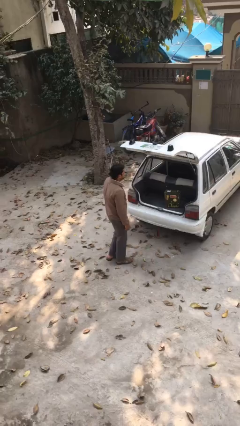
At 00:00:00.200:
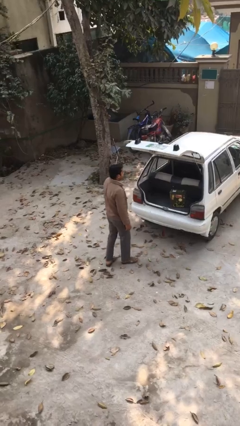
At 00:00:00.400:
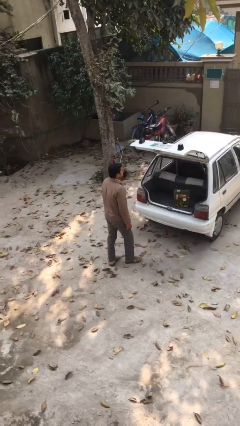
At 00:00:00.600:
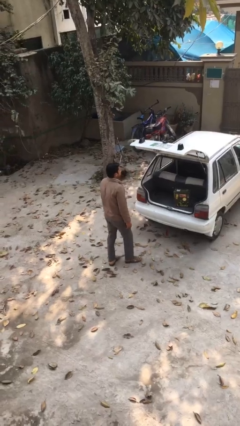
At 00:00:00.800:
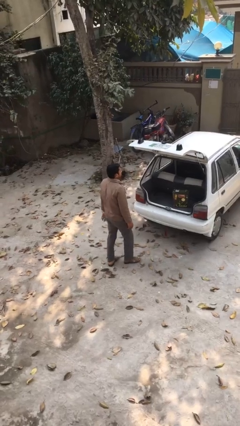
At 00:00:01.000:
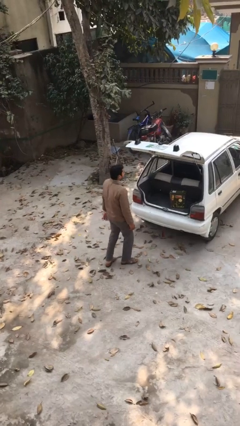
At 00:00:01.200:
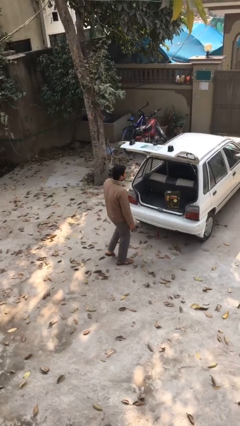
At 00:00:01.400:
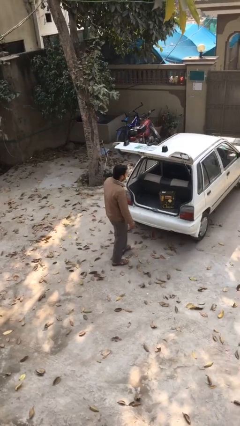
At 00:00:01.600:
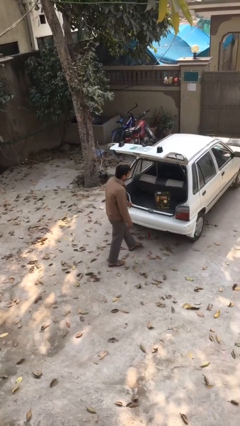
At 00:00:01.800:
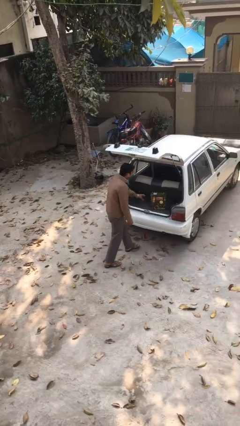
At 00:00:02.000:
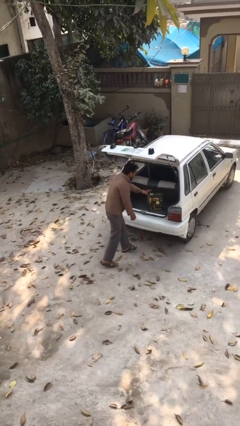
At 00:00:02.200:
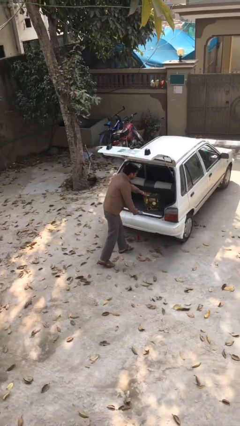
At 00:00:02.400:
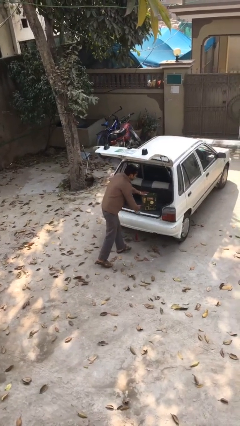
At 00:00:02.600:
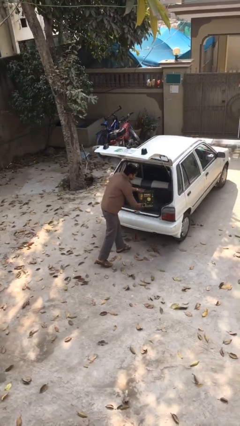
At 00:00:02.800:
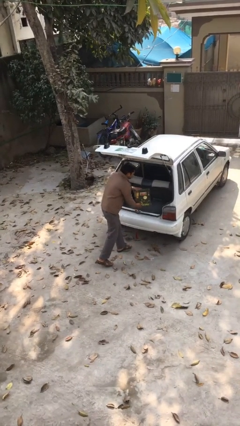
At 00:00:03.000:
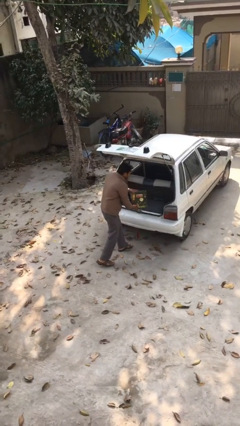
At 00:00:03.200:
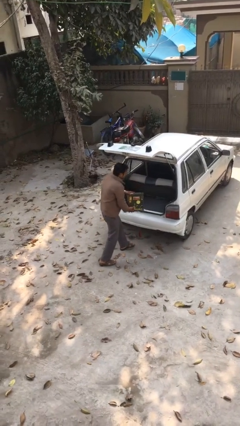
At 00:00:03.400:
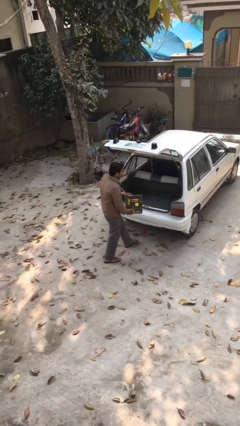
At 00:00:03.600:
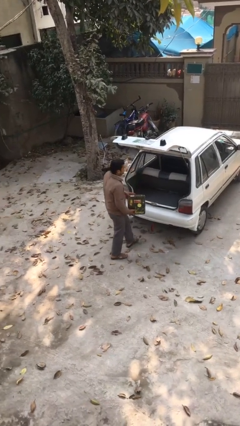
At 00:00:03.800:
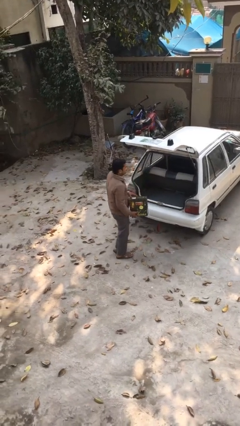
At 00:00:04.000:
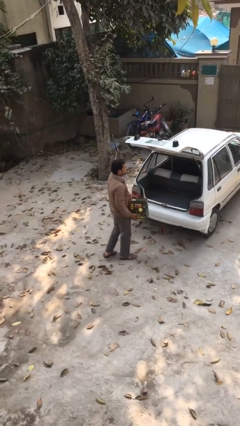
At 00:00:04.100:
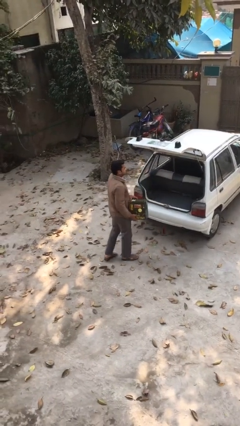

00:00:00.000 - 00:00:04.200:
person unloads car

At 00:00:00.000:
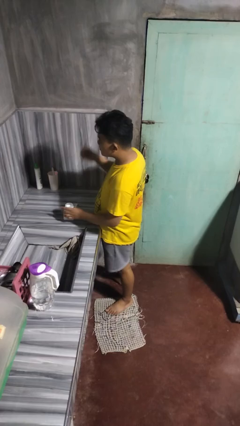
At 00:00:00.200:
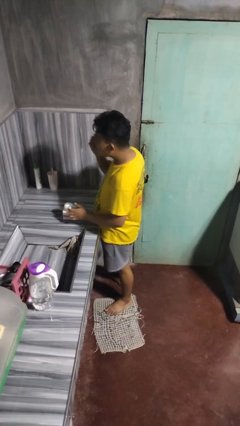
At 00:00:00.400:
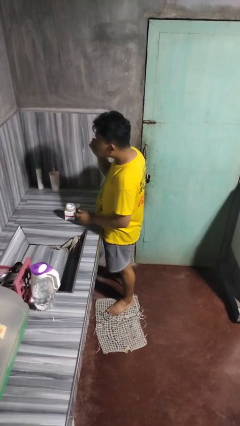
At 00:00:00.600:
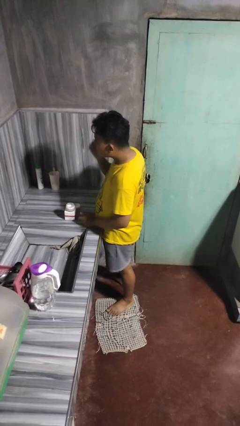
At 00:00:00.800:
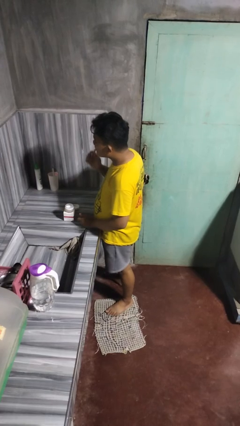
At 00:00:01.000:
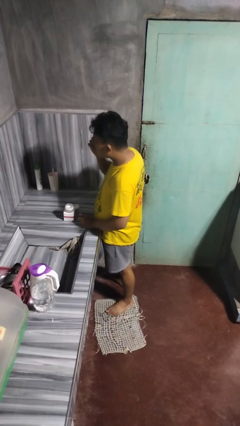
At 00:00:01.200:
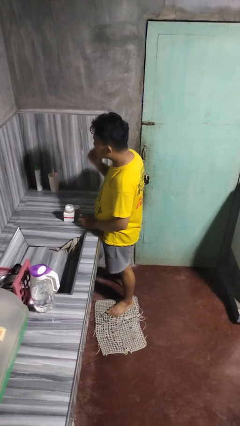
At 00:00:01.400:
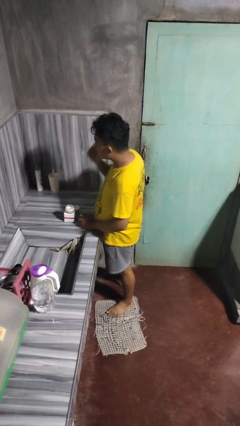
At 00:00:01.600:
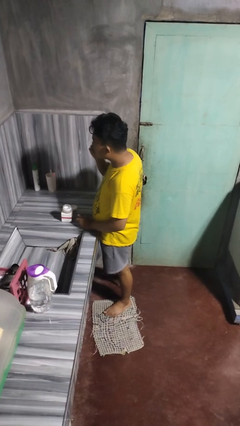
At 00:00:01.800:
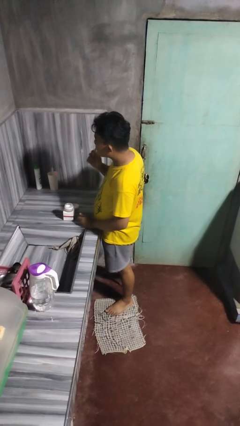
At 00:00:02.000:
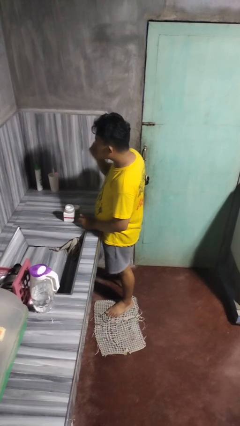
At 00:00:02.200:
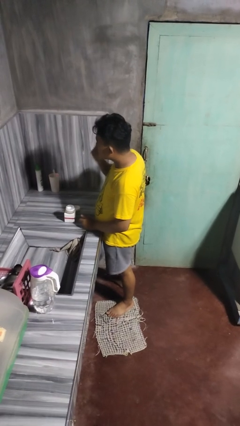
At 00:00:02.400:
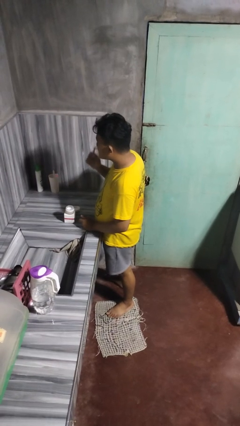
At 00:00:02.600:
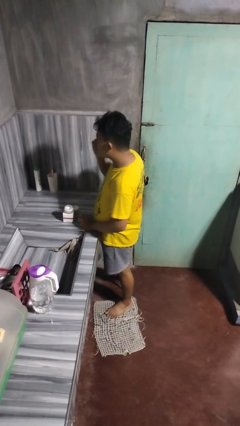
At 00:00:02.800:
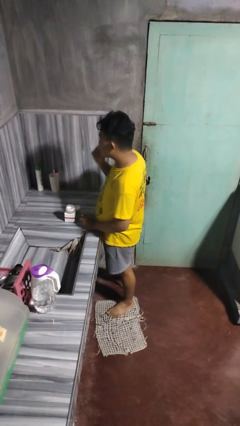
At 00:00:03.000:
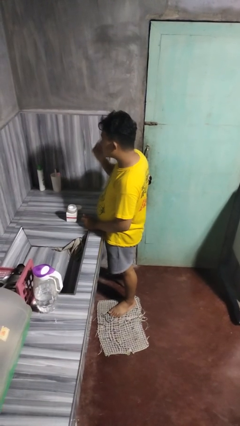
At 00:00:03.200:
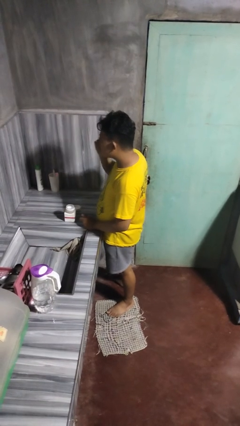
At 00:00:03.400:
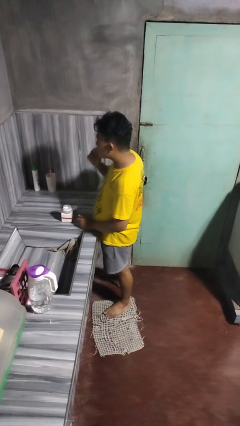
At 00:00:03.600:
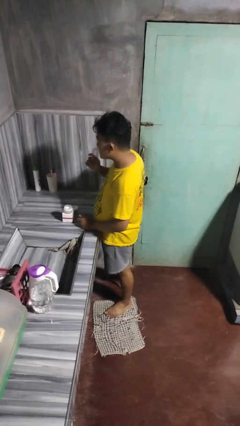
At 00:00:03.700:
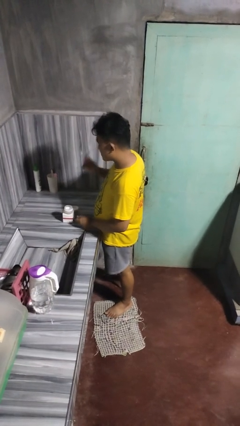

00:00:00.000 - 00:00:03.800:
person shaves face

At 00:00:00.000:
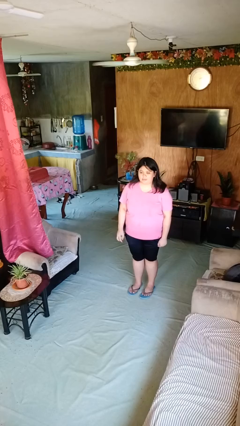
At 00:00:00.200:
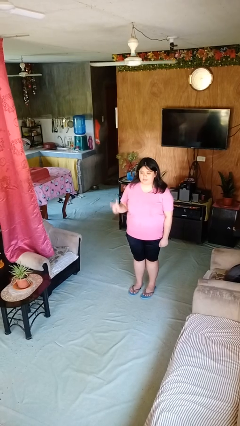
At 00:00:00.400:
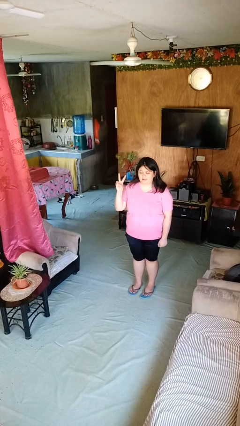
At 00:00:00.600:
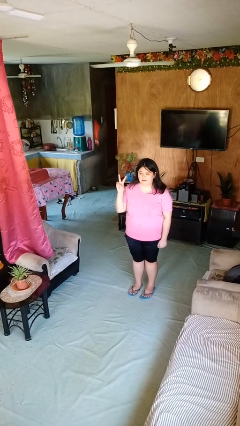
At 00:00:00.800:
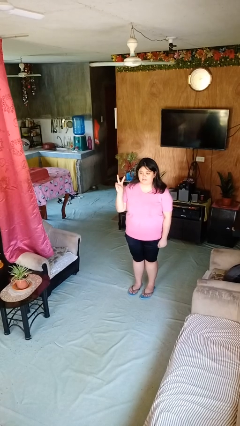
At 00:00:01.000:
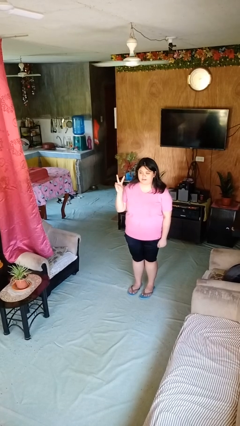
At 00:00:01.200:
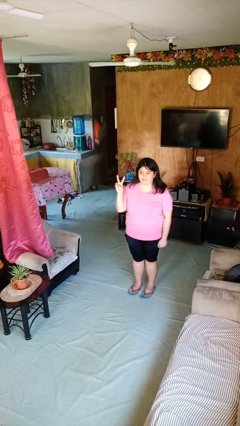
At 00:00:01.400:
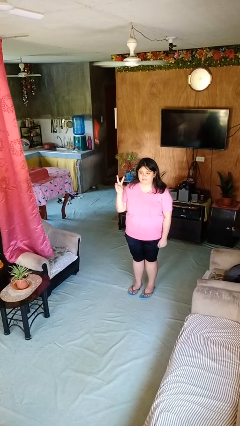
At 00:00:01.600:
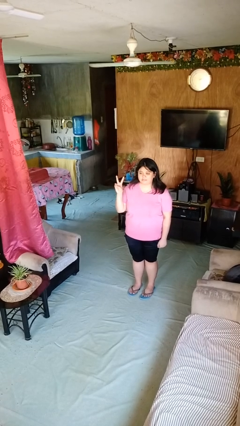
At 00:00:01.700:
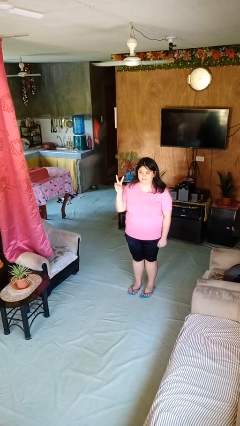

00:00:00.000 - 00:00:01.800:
person gestures peace

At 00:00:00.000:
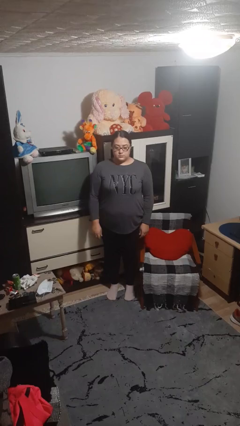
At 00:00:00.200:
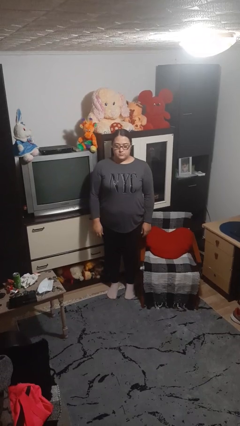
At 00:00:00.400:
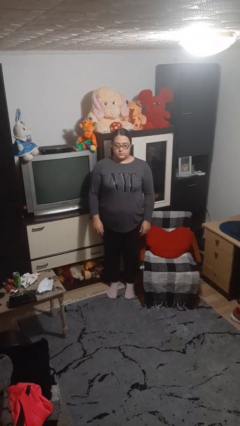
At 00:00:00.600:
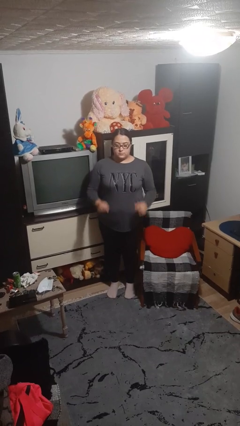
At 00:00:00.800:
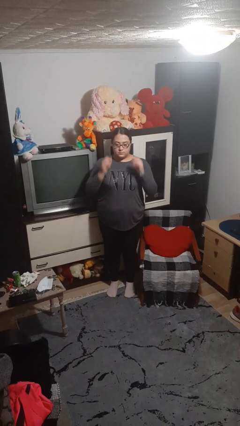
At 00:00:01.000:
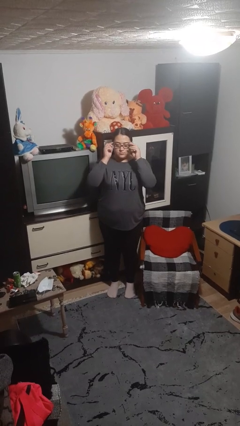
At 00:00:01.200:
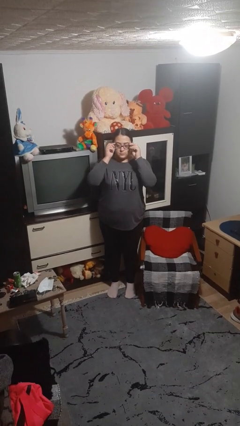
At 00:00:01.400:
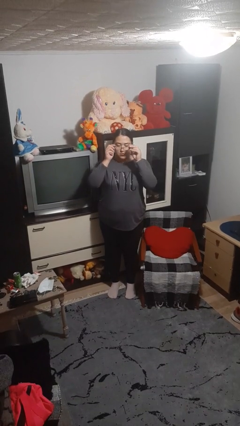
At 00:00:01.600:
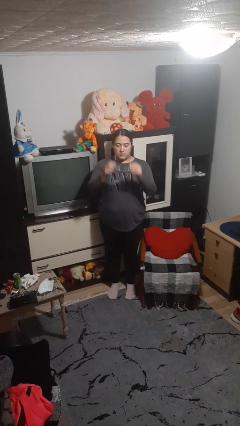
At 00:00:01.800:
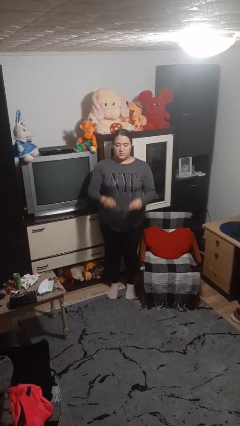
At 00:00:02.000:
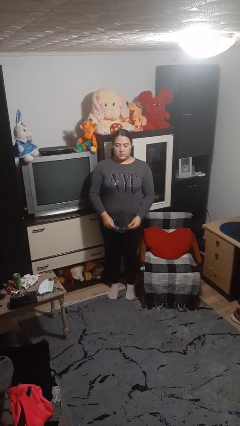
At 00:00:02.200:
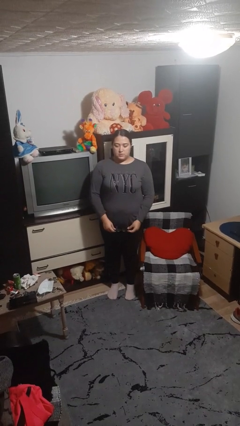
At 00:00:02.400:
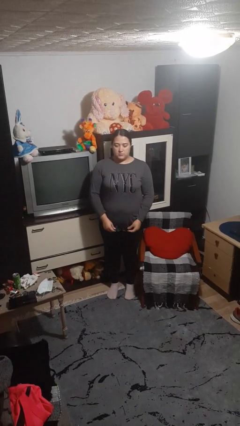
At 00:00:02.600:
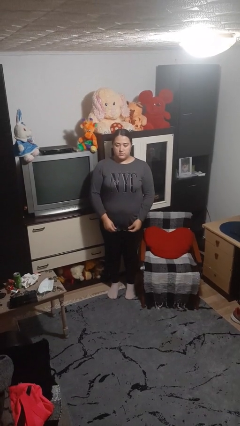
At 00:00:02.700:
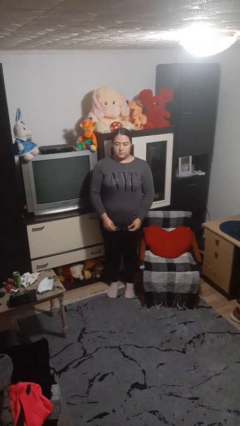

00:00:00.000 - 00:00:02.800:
person takes off glasses

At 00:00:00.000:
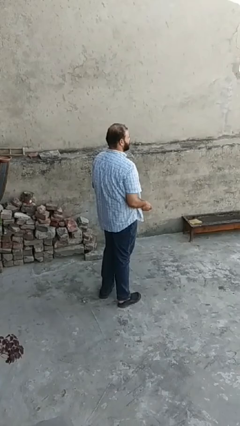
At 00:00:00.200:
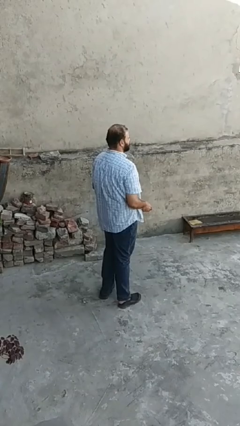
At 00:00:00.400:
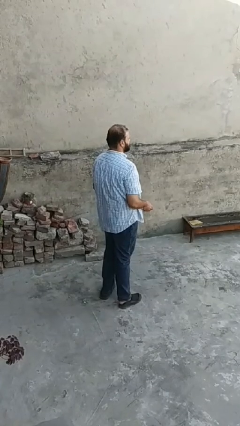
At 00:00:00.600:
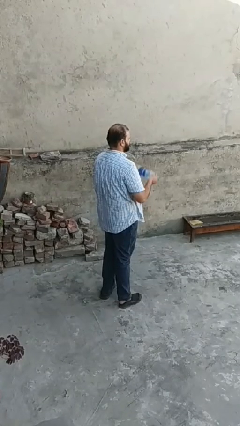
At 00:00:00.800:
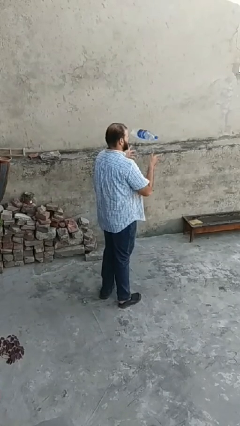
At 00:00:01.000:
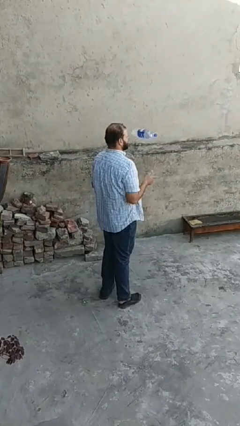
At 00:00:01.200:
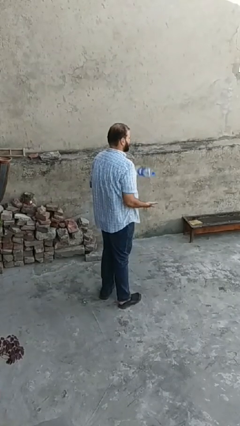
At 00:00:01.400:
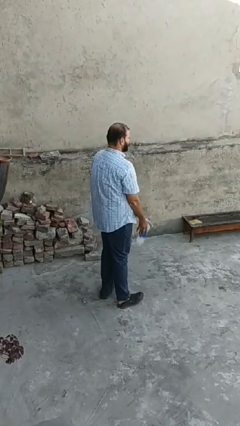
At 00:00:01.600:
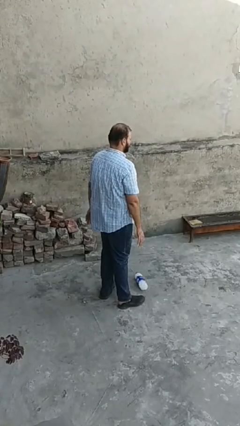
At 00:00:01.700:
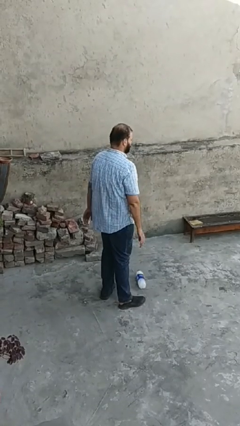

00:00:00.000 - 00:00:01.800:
person throws object into air

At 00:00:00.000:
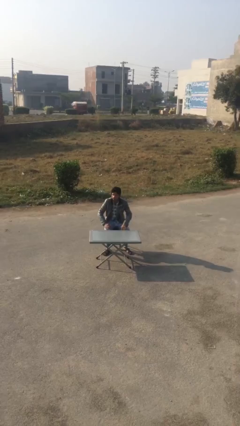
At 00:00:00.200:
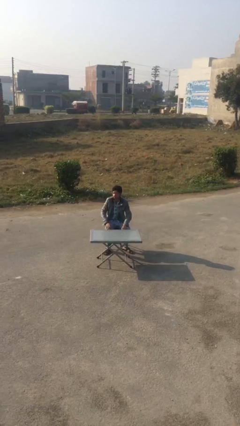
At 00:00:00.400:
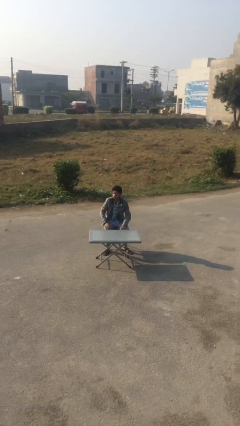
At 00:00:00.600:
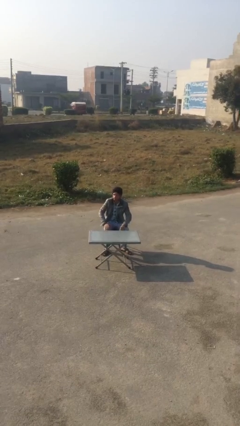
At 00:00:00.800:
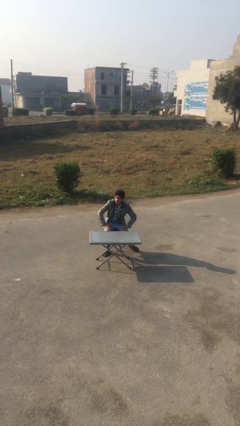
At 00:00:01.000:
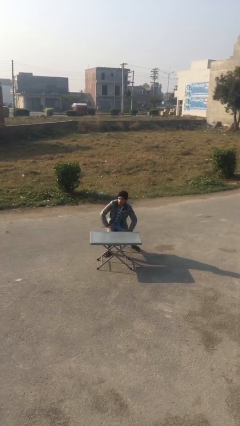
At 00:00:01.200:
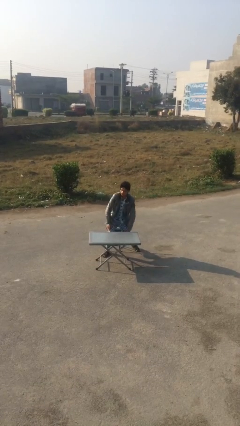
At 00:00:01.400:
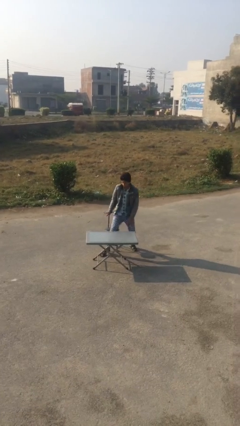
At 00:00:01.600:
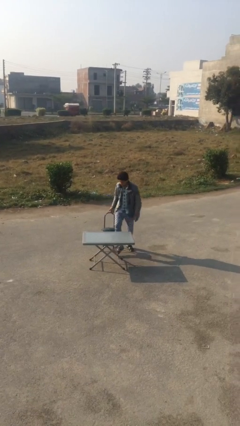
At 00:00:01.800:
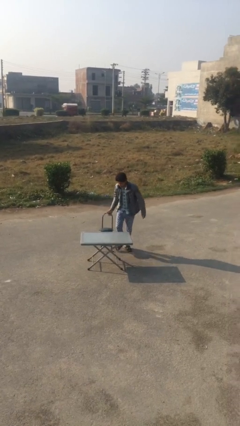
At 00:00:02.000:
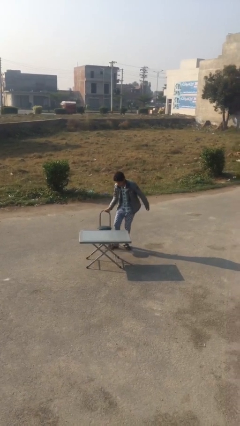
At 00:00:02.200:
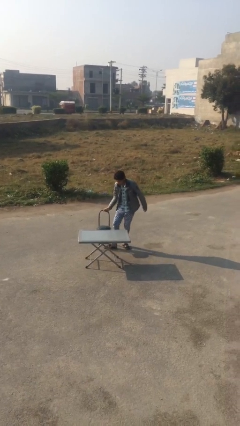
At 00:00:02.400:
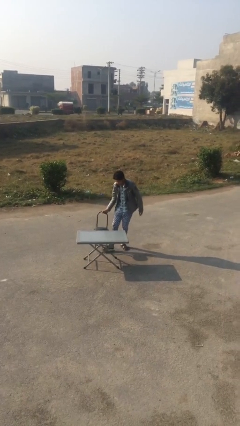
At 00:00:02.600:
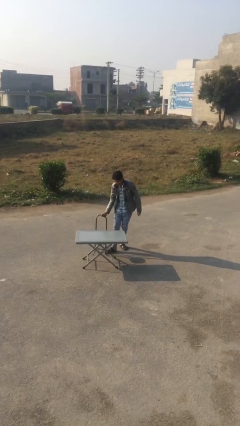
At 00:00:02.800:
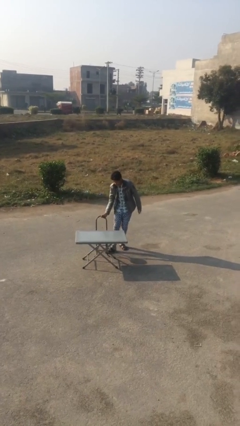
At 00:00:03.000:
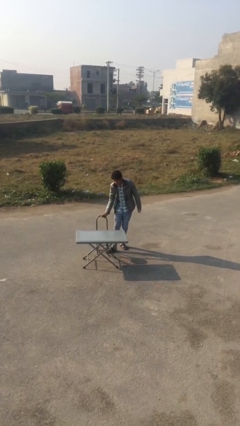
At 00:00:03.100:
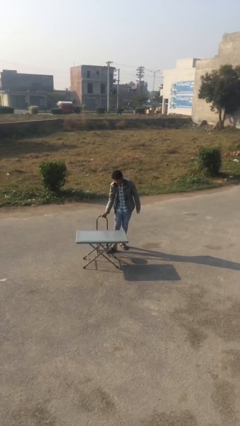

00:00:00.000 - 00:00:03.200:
person stands up
